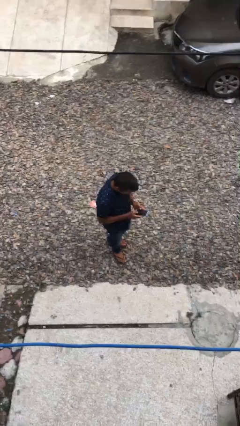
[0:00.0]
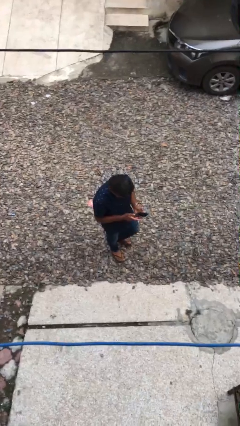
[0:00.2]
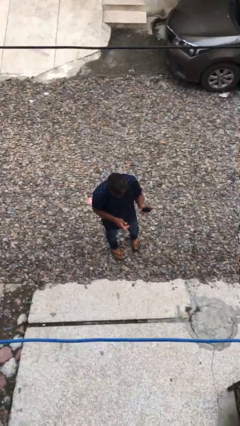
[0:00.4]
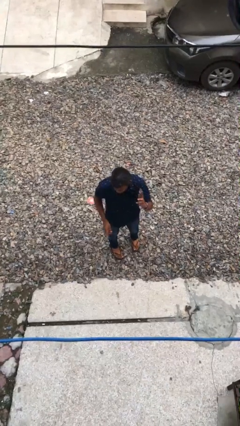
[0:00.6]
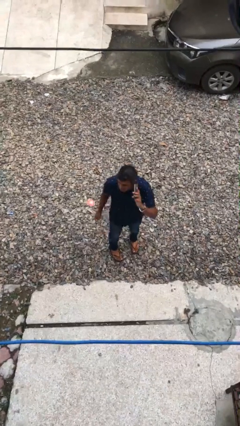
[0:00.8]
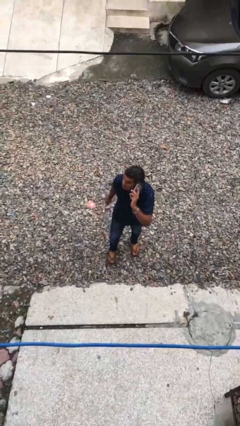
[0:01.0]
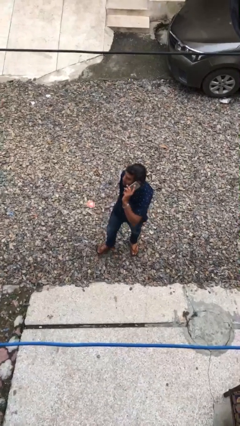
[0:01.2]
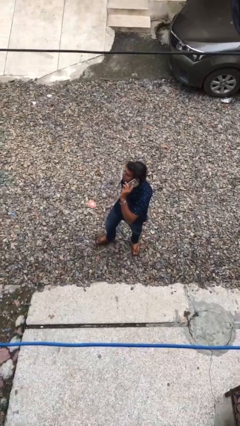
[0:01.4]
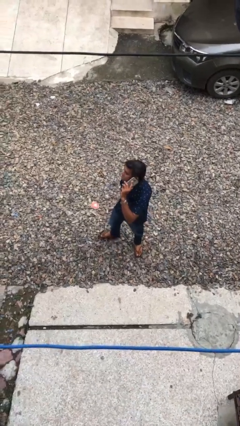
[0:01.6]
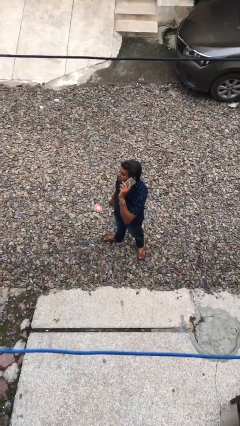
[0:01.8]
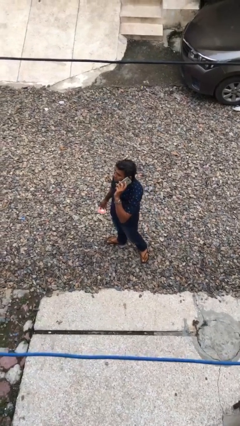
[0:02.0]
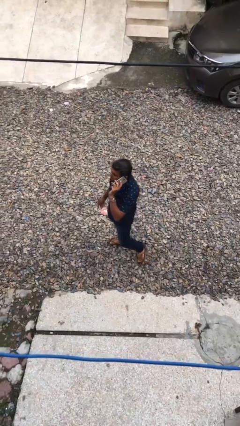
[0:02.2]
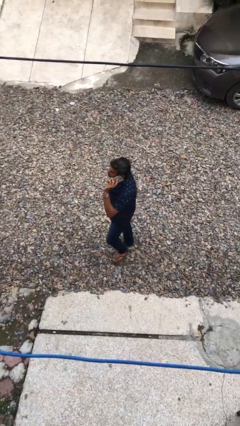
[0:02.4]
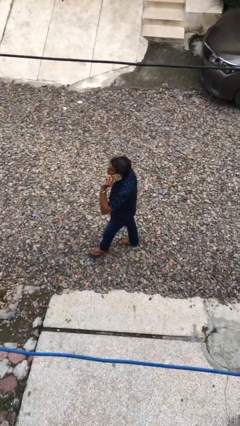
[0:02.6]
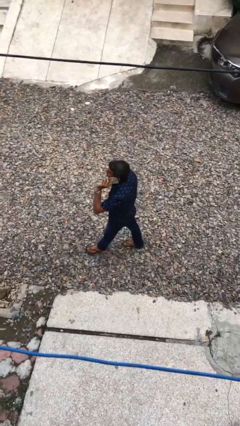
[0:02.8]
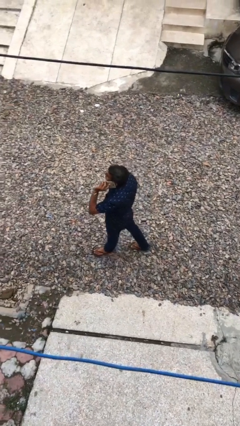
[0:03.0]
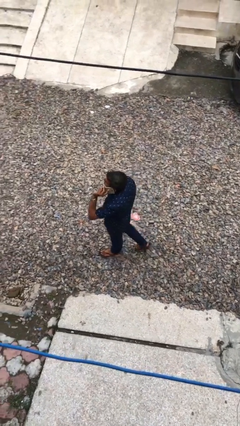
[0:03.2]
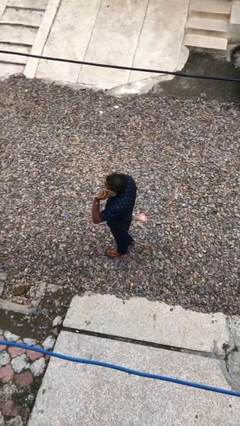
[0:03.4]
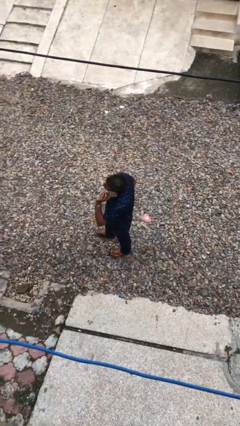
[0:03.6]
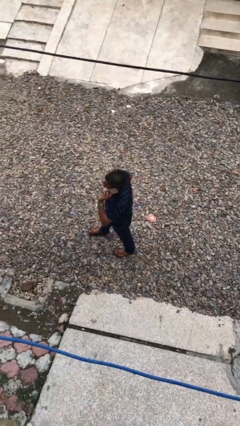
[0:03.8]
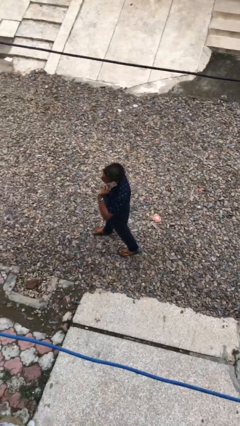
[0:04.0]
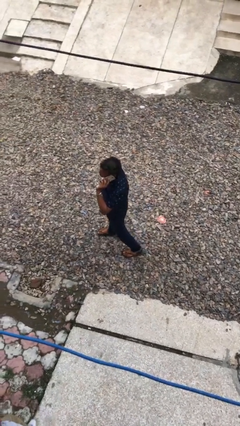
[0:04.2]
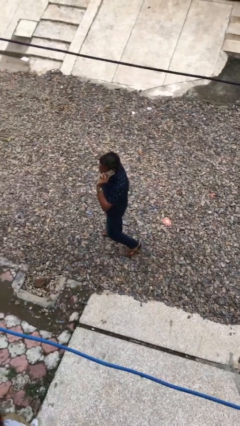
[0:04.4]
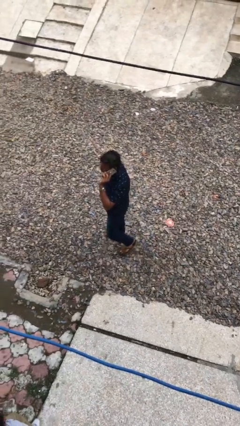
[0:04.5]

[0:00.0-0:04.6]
person talks on phone

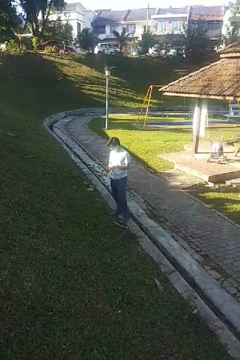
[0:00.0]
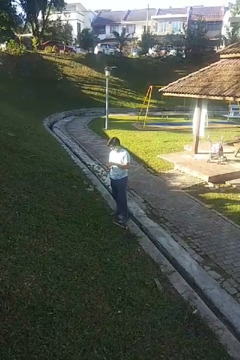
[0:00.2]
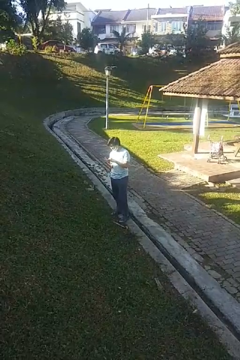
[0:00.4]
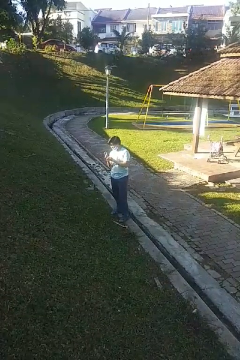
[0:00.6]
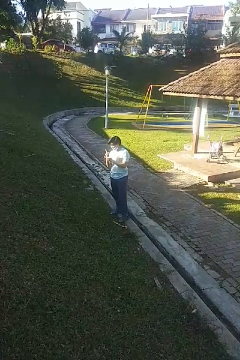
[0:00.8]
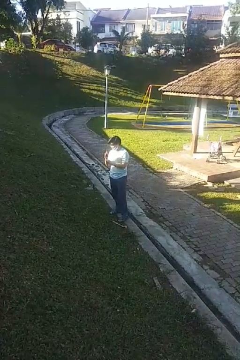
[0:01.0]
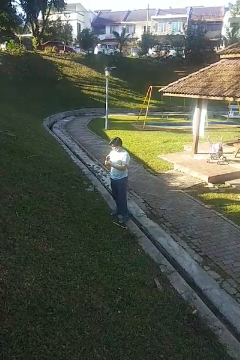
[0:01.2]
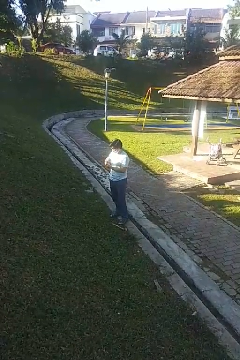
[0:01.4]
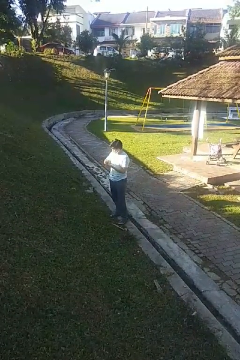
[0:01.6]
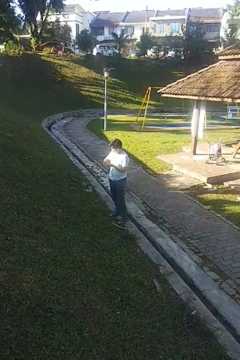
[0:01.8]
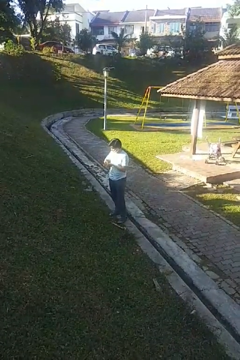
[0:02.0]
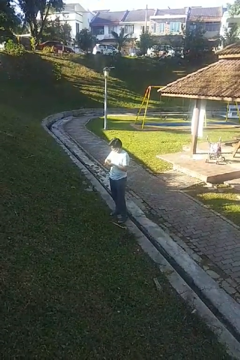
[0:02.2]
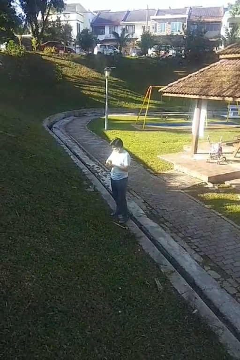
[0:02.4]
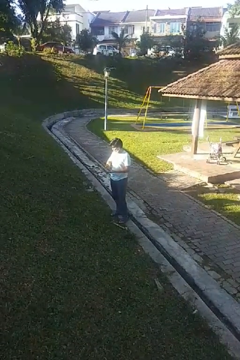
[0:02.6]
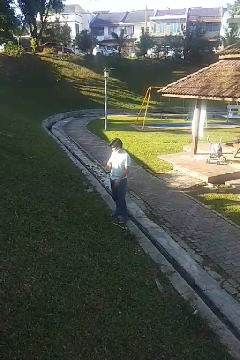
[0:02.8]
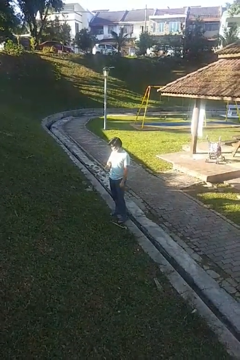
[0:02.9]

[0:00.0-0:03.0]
person puts on wristwatch

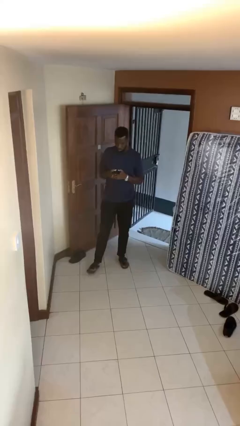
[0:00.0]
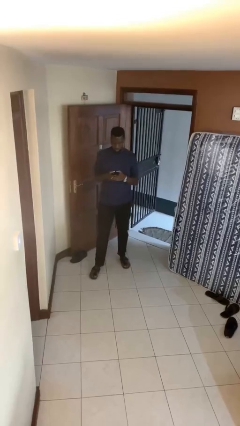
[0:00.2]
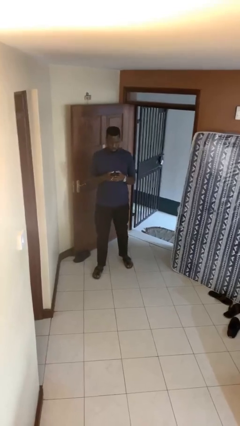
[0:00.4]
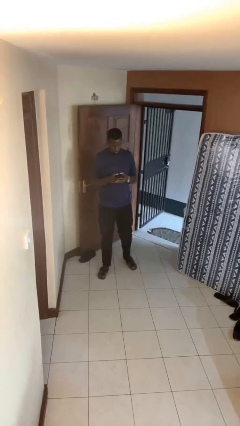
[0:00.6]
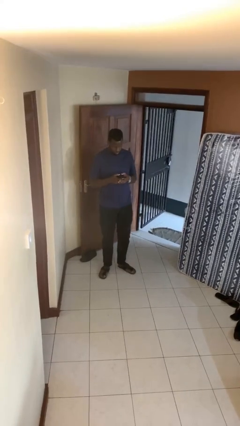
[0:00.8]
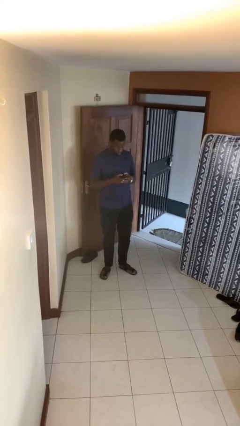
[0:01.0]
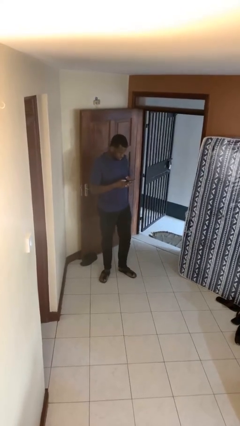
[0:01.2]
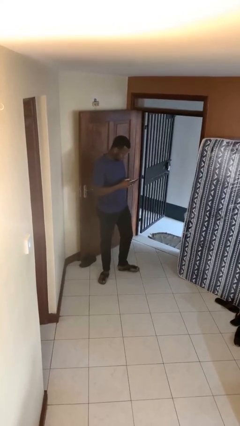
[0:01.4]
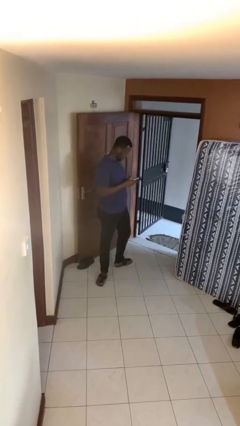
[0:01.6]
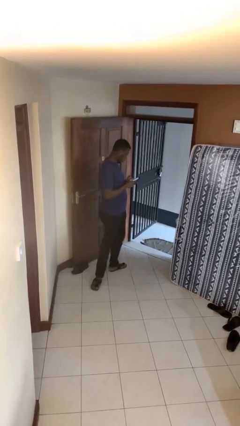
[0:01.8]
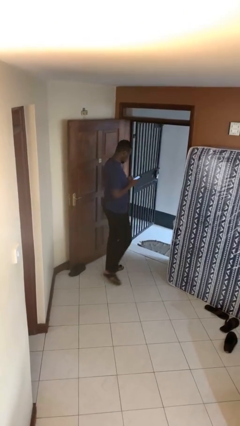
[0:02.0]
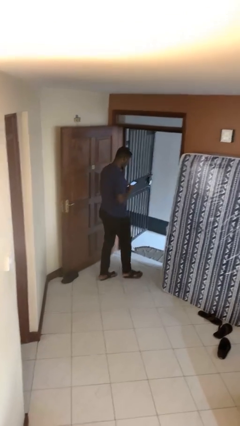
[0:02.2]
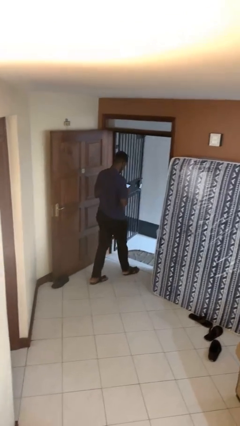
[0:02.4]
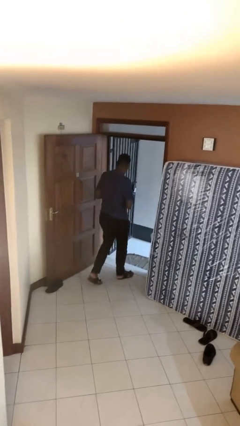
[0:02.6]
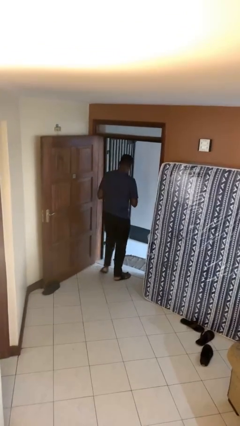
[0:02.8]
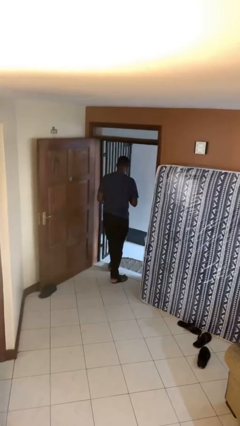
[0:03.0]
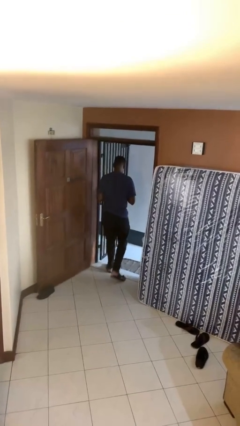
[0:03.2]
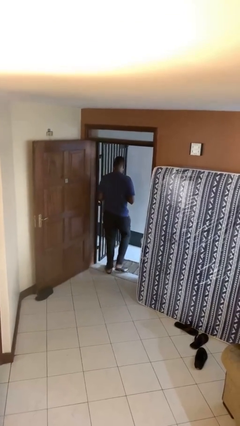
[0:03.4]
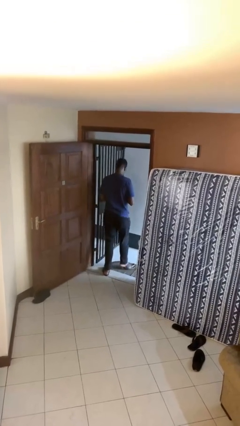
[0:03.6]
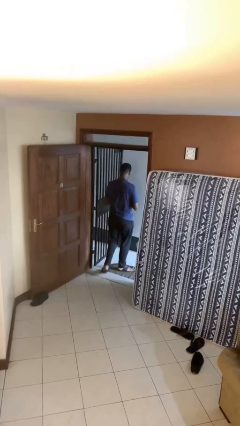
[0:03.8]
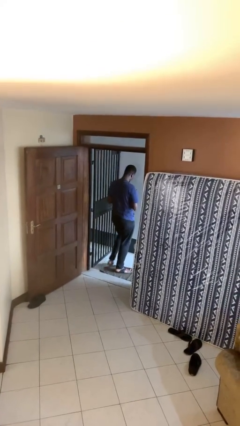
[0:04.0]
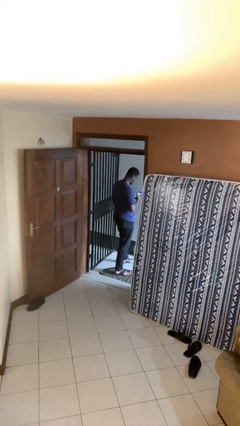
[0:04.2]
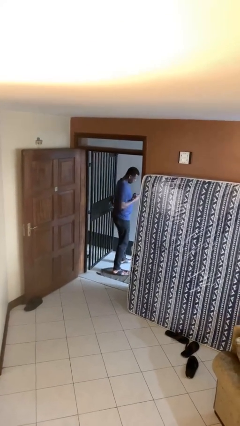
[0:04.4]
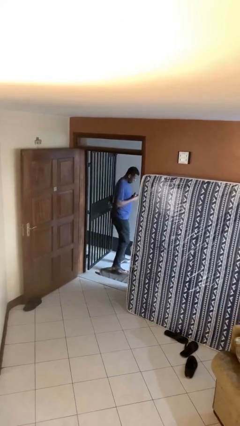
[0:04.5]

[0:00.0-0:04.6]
person exits scene through structure

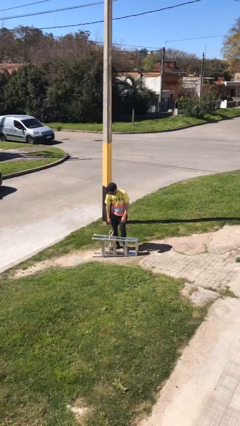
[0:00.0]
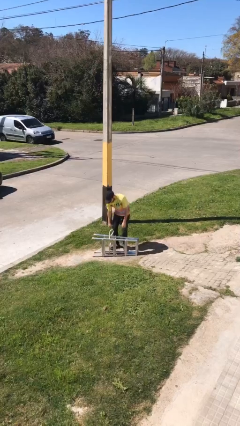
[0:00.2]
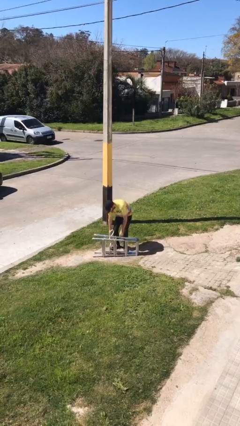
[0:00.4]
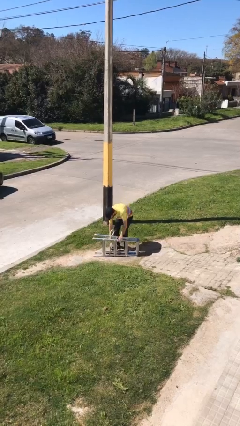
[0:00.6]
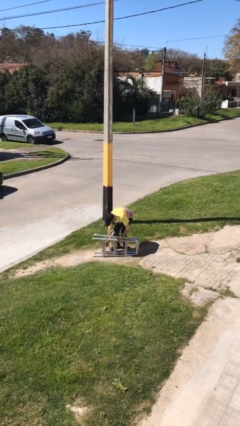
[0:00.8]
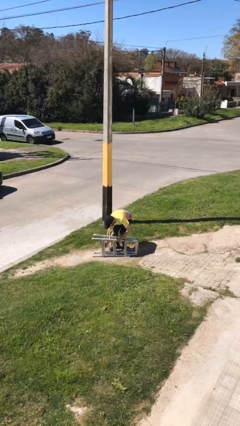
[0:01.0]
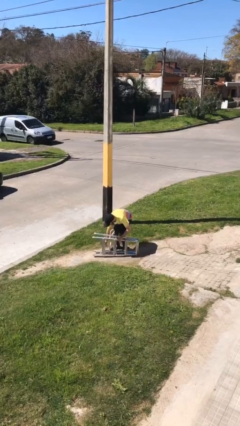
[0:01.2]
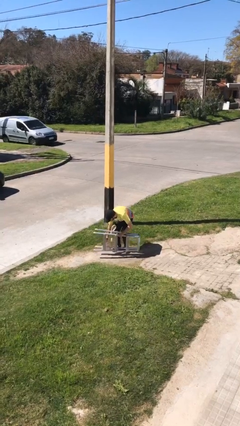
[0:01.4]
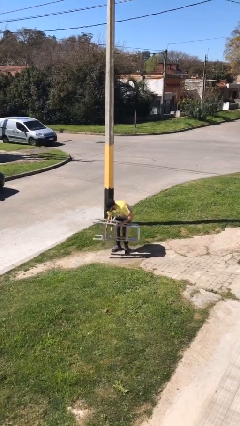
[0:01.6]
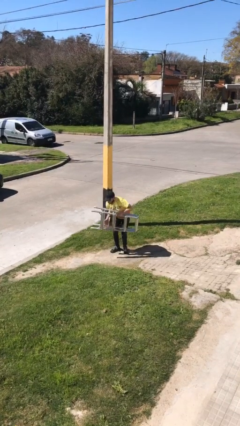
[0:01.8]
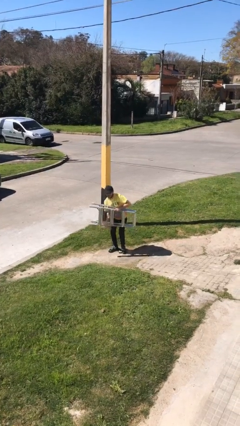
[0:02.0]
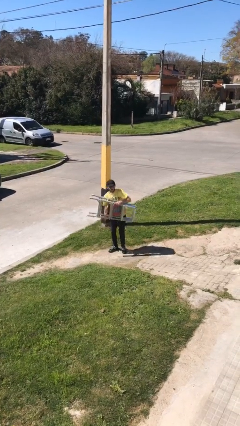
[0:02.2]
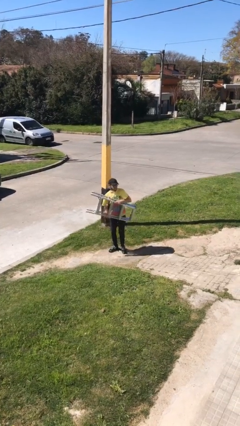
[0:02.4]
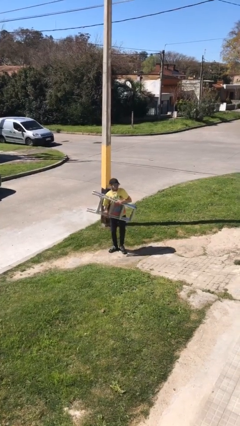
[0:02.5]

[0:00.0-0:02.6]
person picks up object from floor

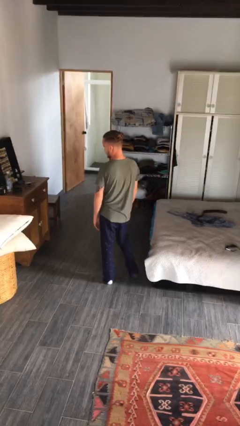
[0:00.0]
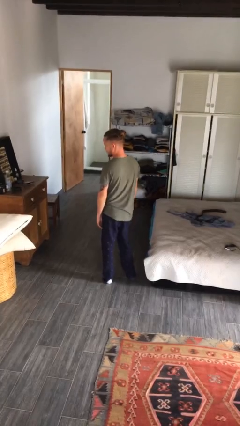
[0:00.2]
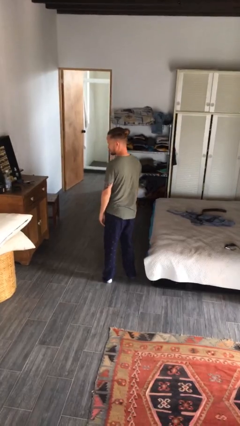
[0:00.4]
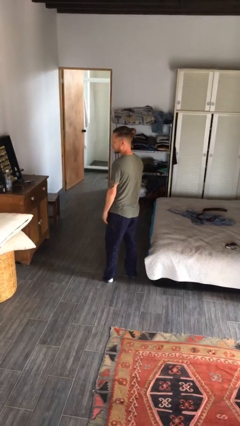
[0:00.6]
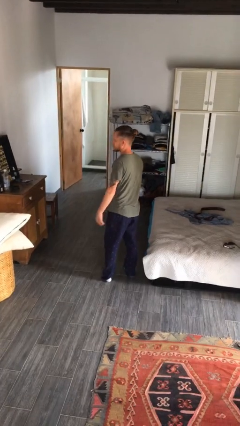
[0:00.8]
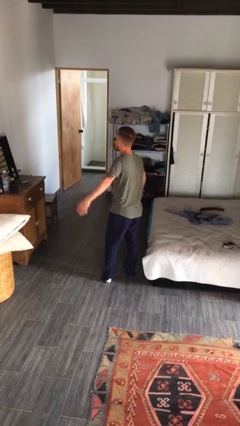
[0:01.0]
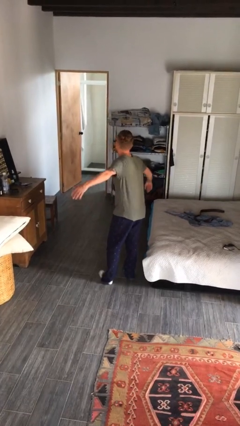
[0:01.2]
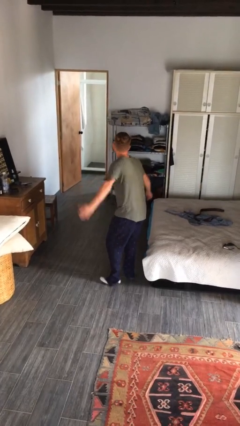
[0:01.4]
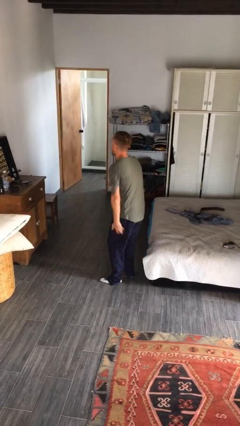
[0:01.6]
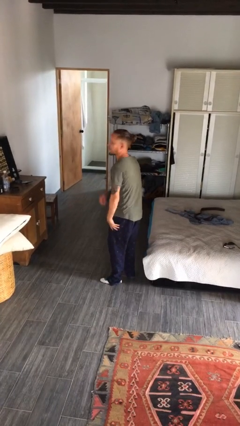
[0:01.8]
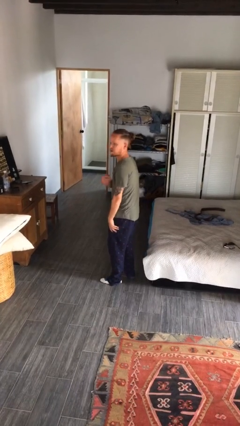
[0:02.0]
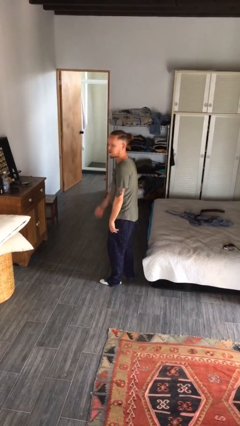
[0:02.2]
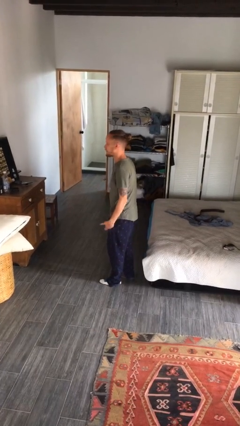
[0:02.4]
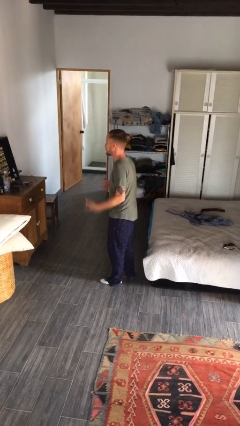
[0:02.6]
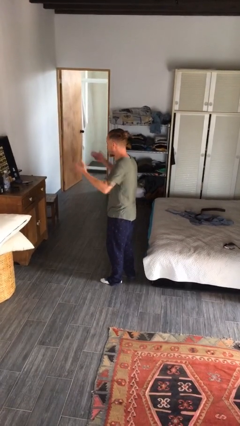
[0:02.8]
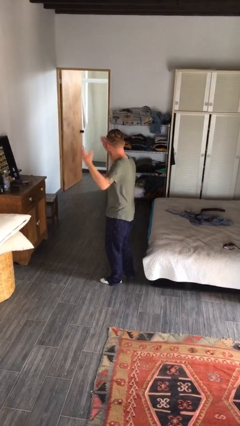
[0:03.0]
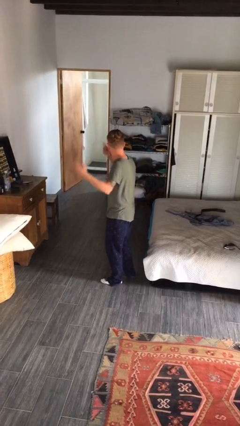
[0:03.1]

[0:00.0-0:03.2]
person slaps hands on thighs
